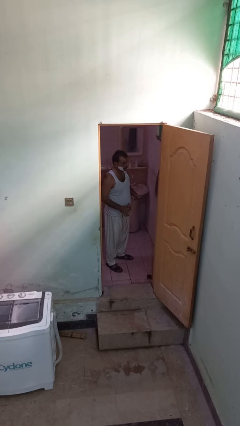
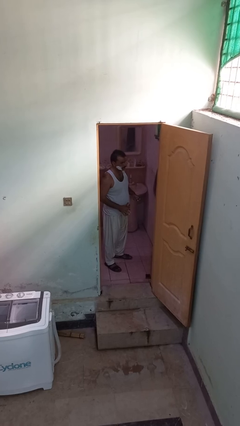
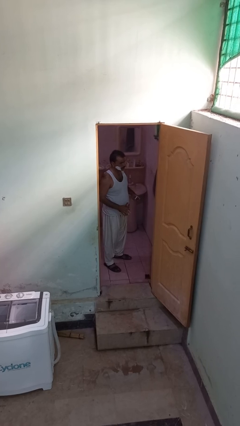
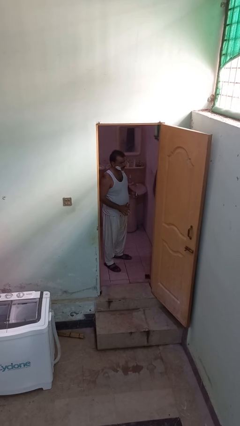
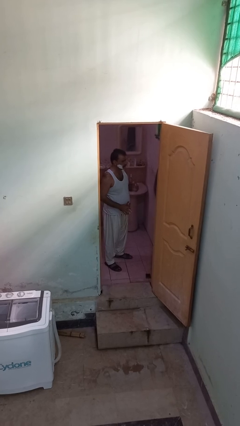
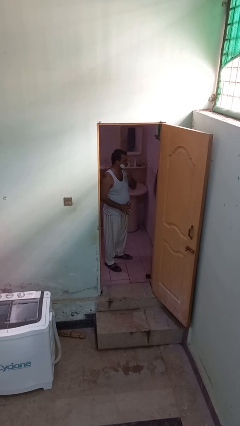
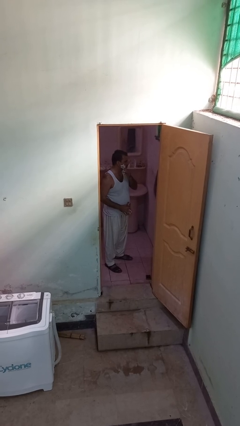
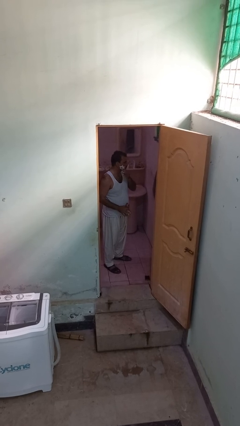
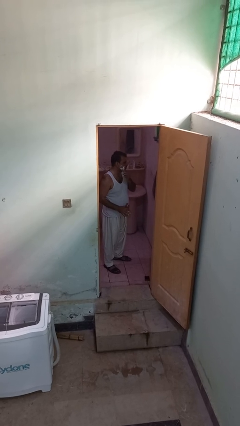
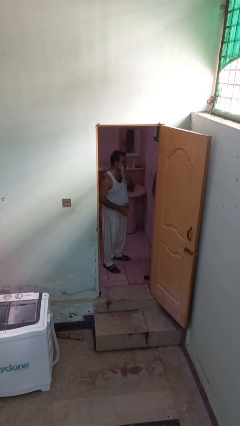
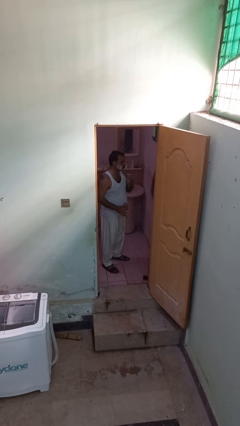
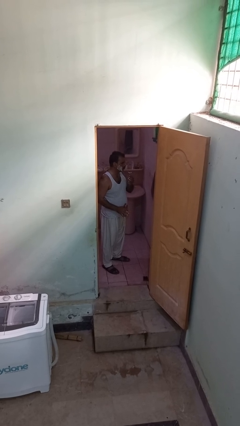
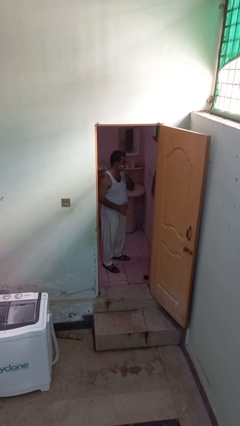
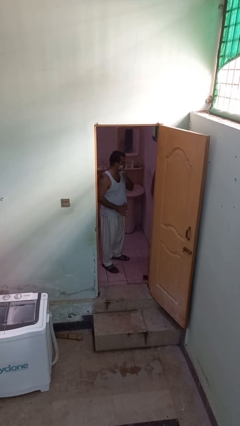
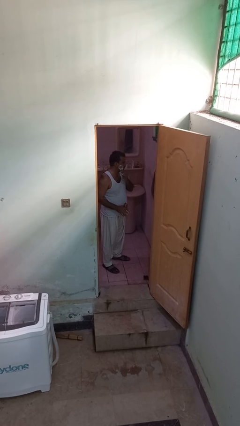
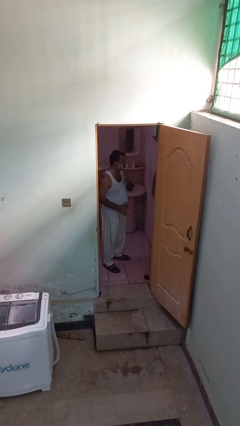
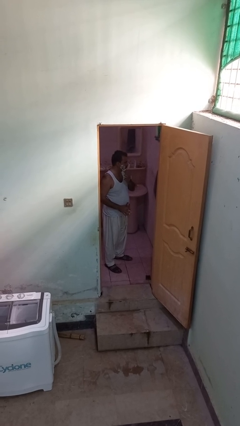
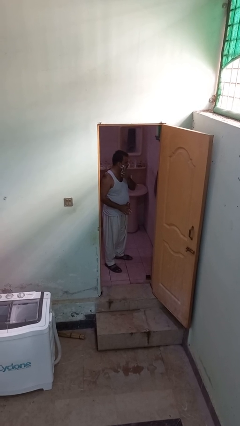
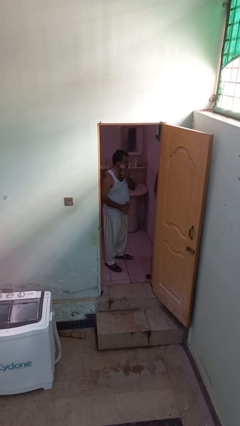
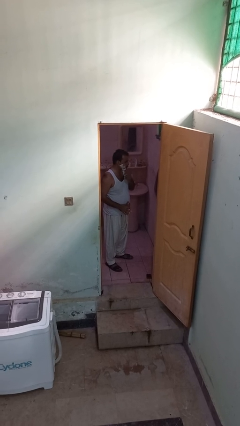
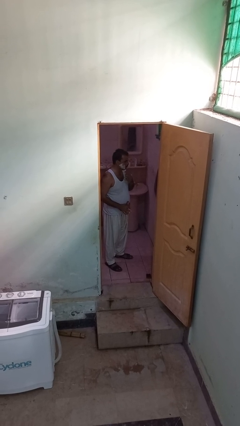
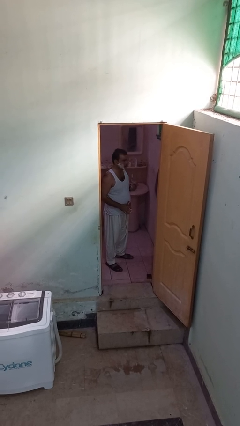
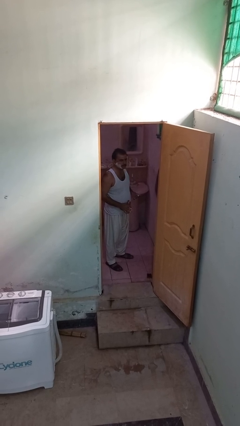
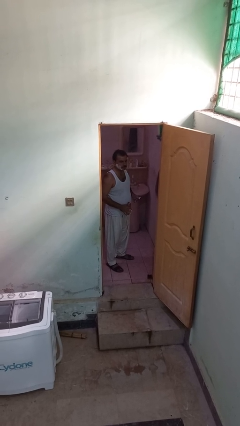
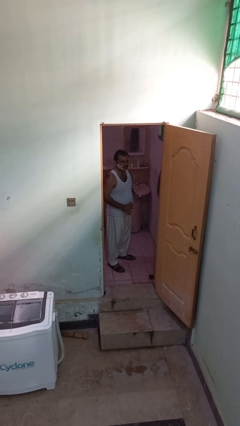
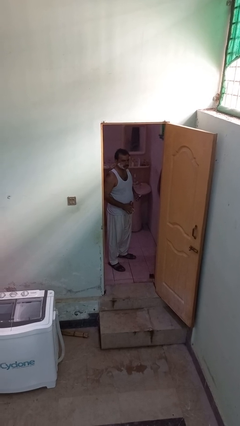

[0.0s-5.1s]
person shaves face

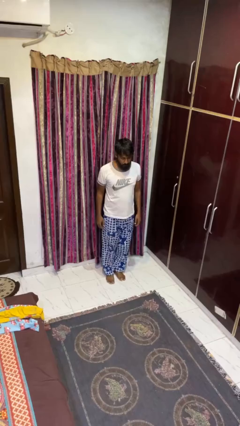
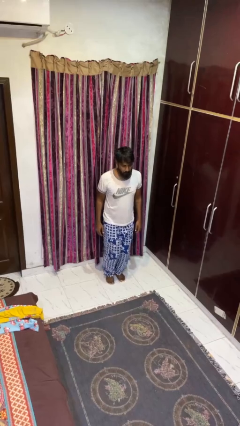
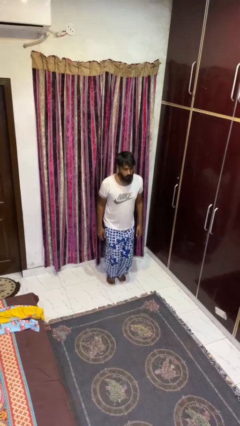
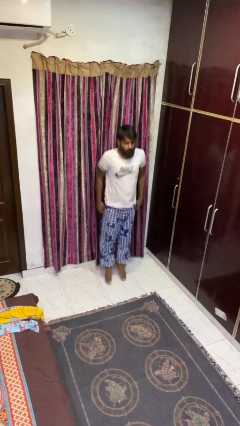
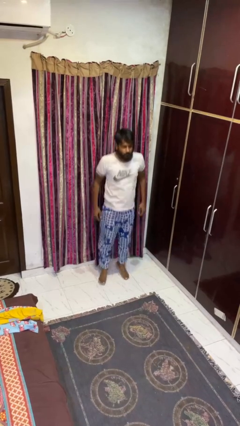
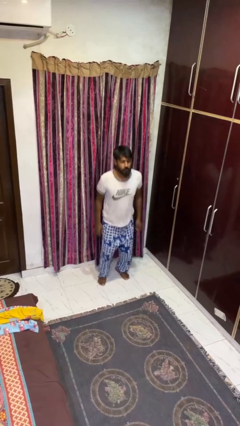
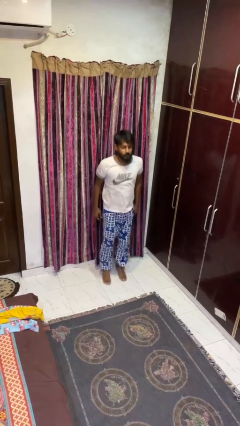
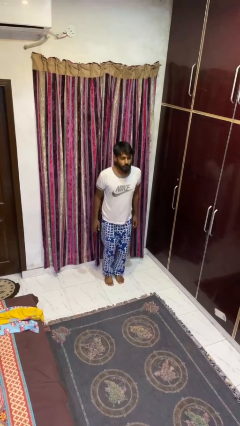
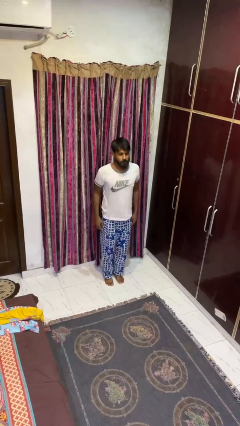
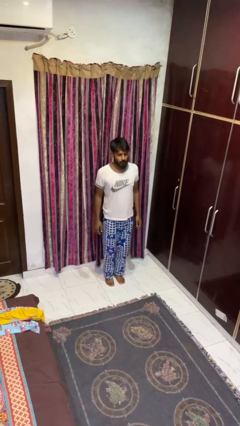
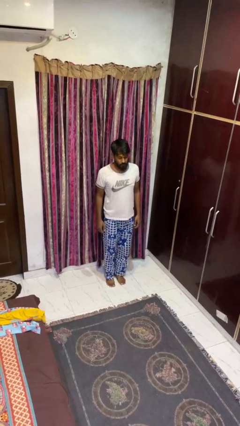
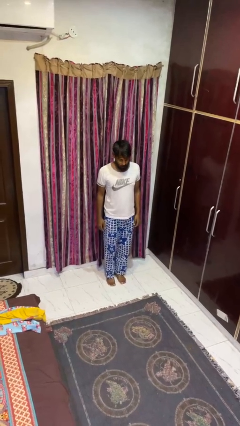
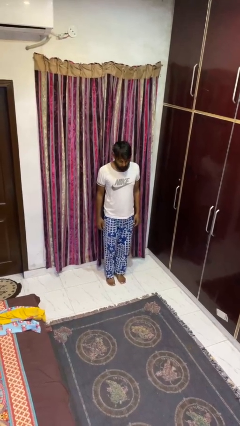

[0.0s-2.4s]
person jumps

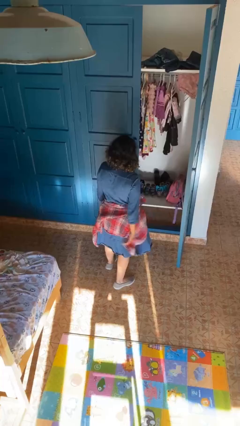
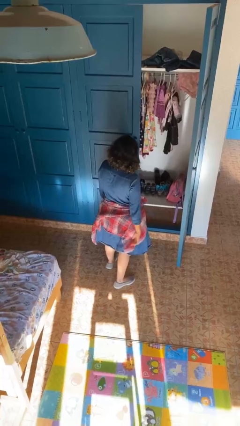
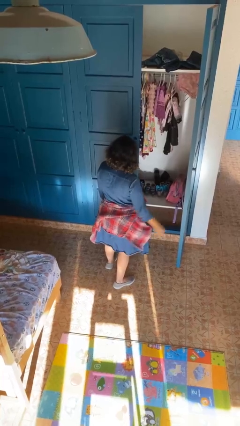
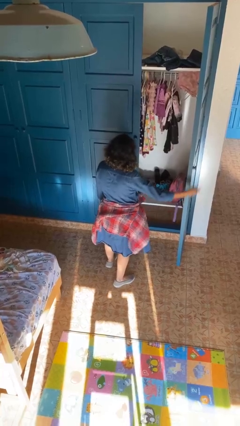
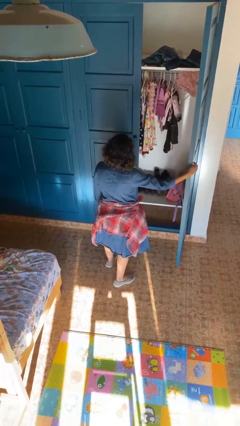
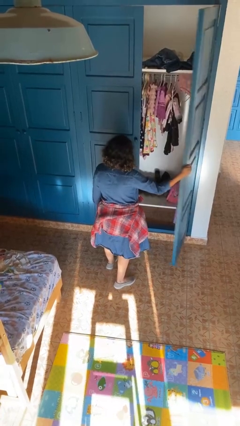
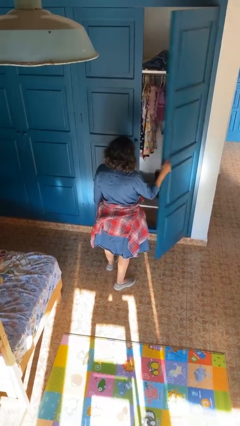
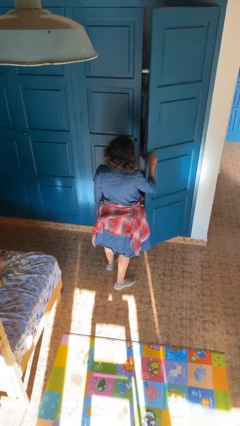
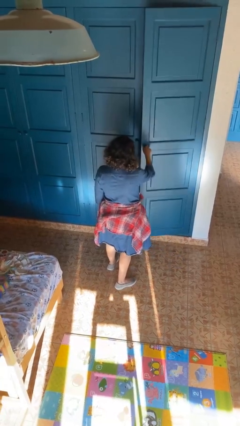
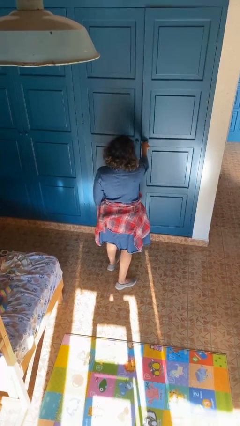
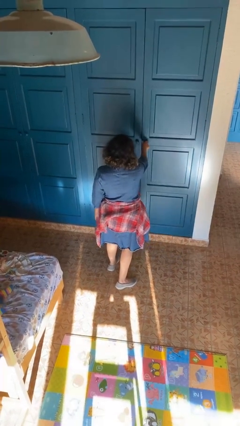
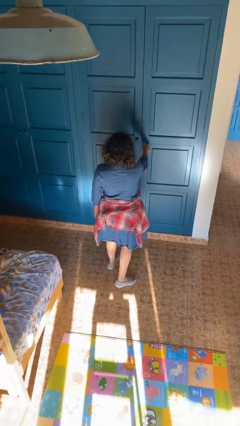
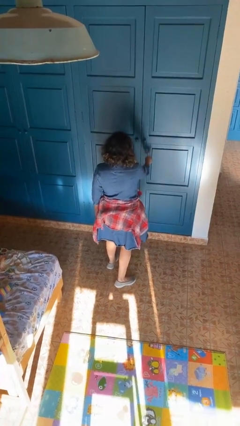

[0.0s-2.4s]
person closes closet door

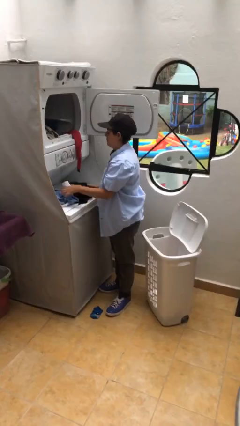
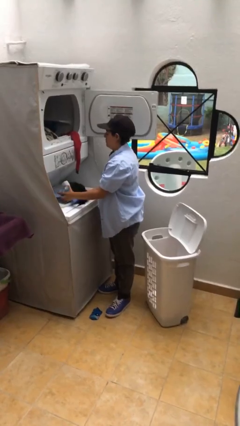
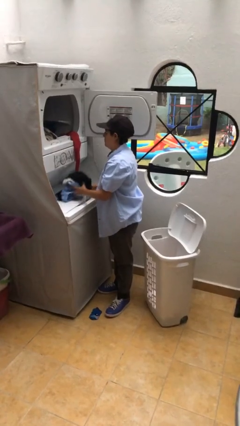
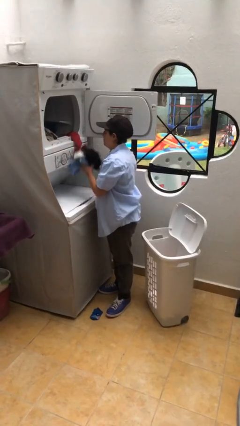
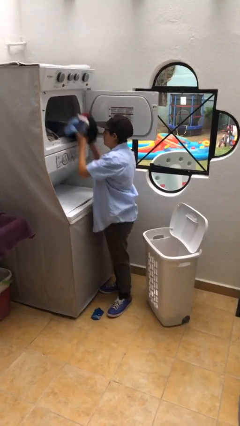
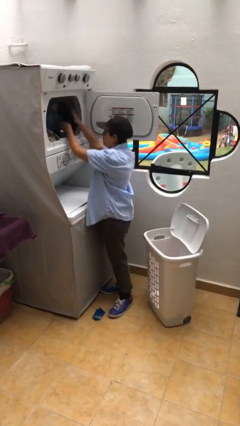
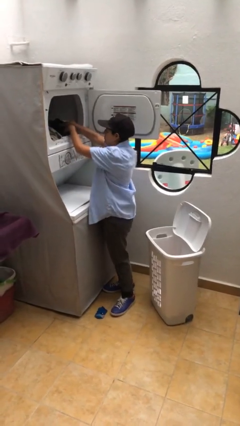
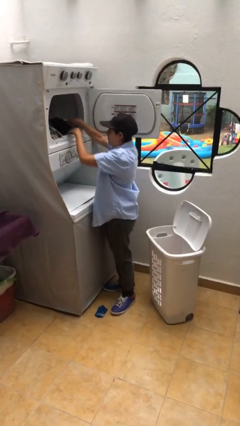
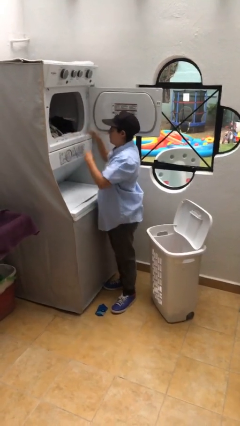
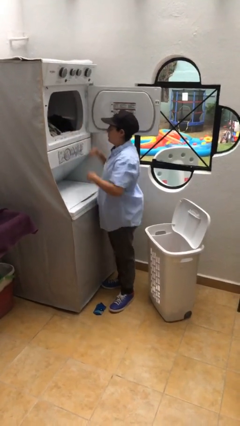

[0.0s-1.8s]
person loads dryer

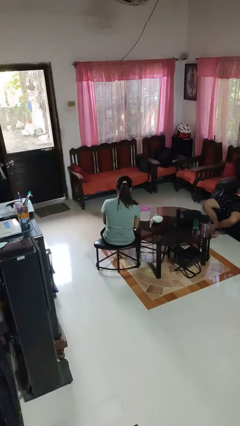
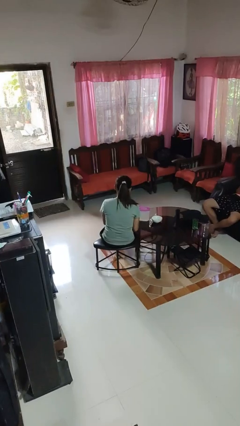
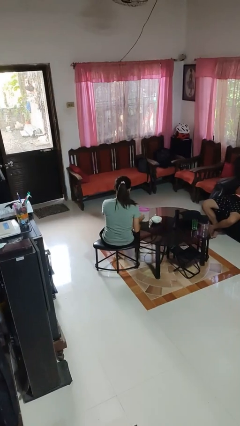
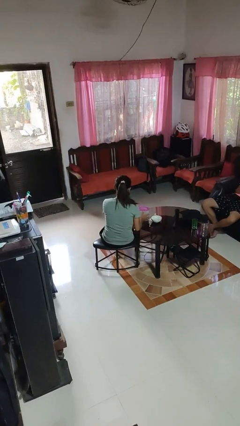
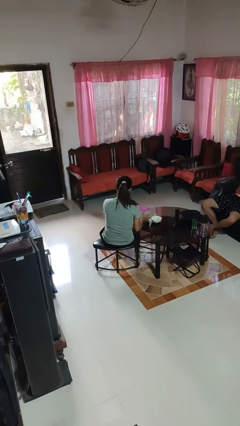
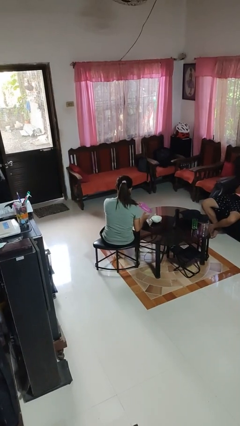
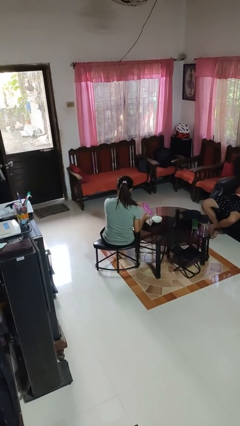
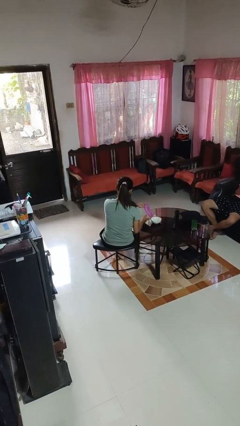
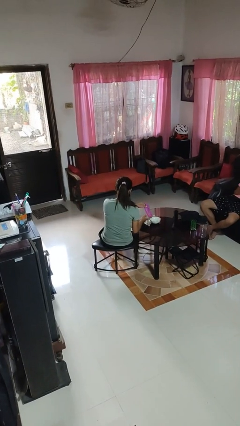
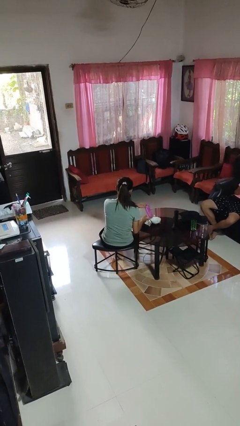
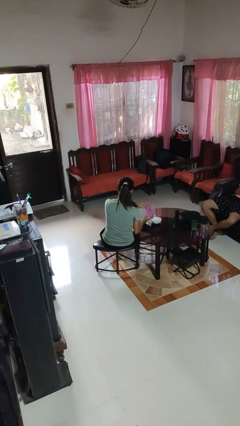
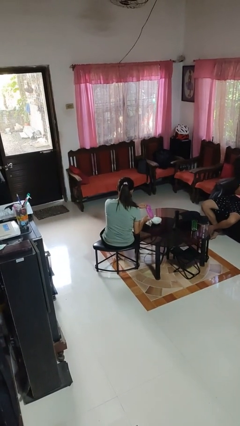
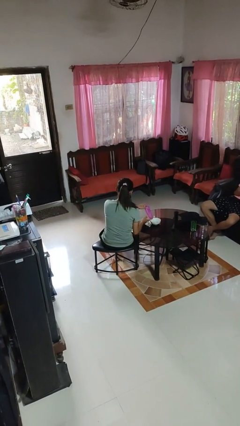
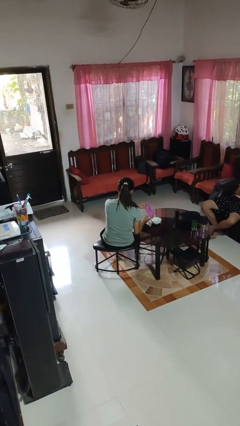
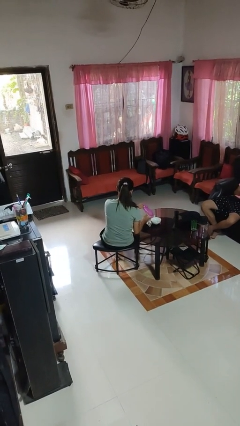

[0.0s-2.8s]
person pours into bowl

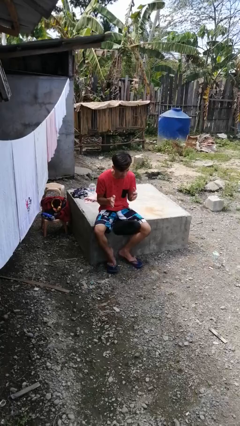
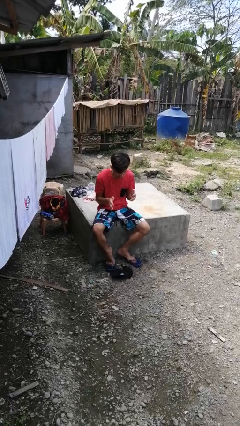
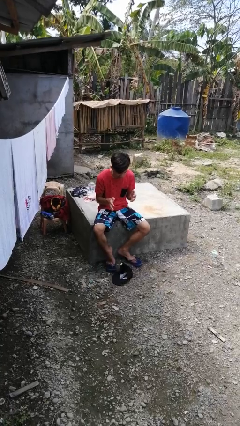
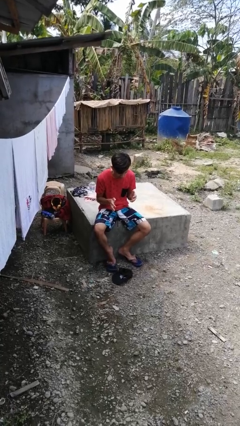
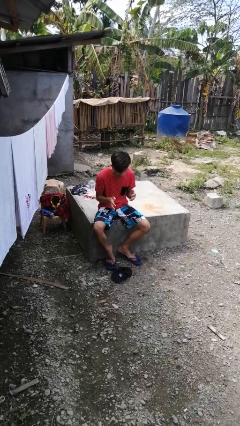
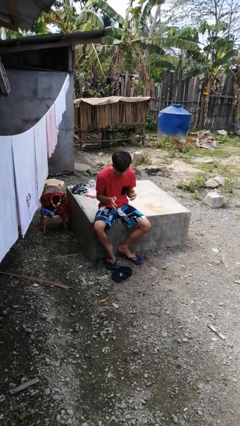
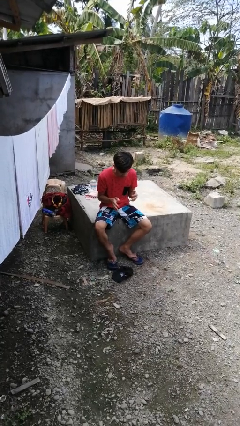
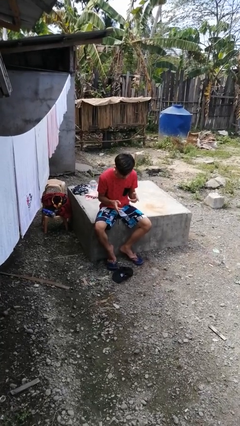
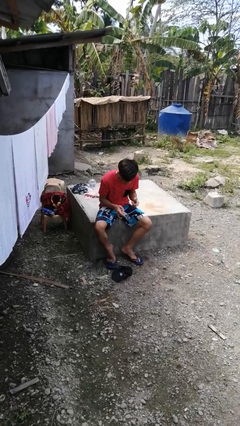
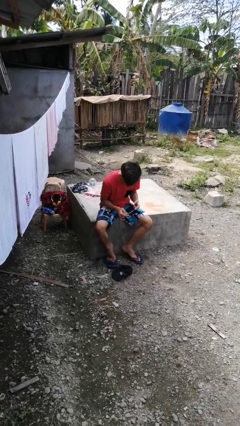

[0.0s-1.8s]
person drops object

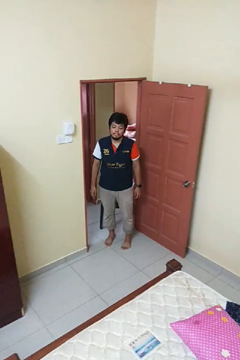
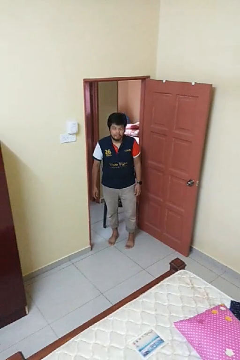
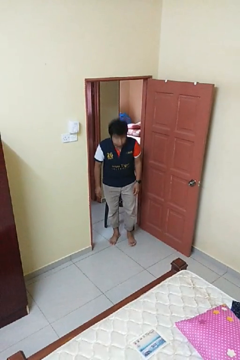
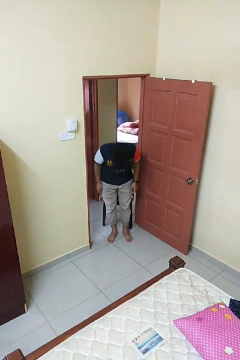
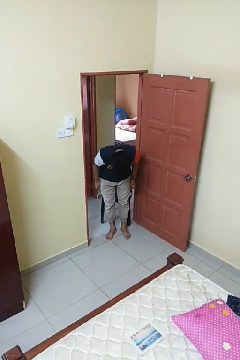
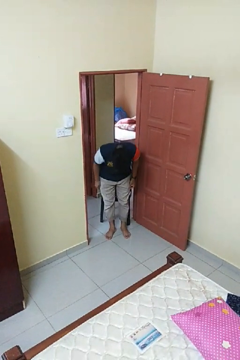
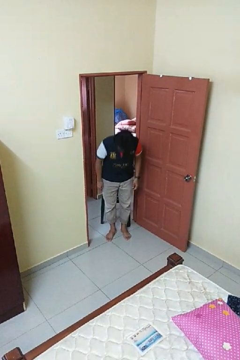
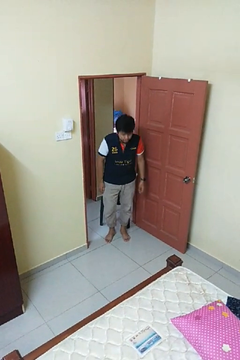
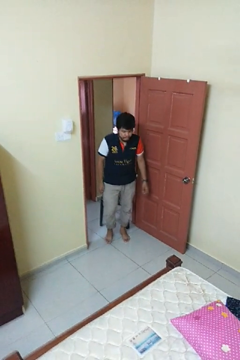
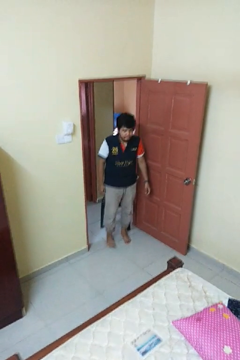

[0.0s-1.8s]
person bows
